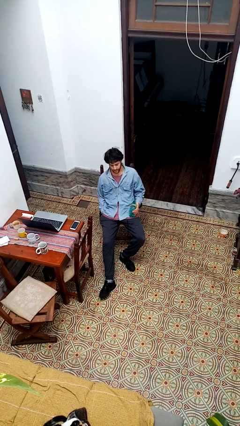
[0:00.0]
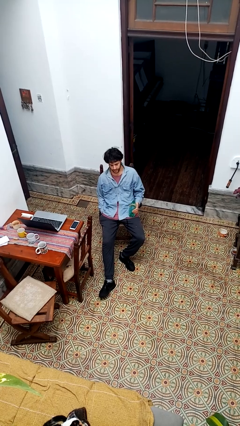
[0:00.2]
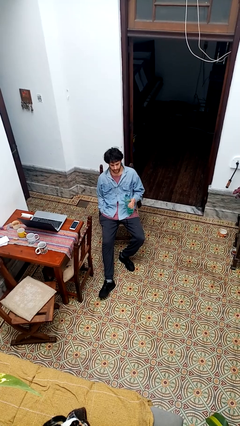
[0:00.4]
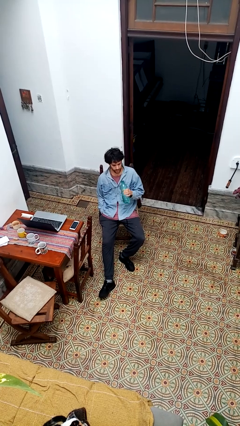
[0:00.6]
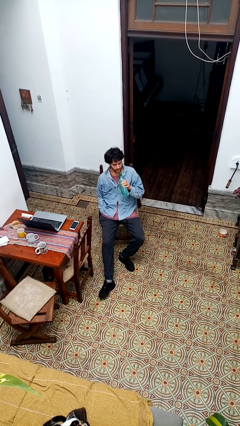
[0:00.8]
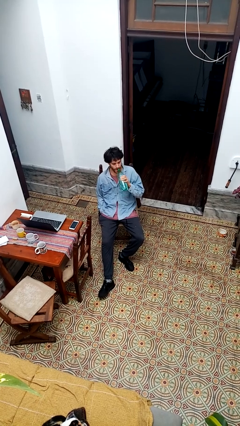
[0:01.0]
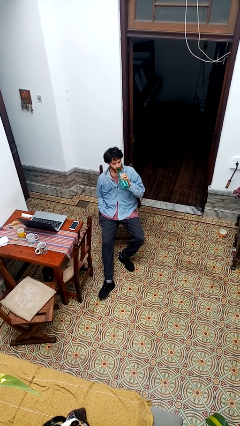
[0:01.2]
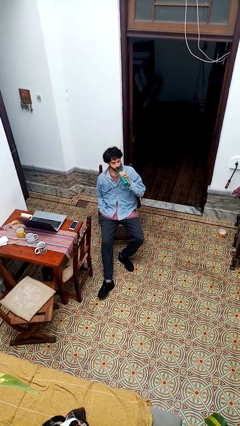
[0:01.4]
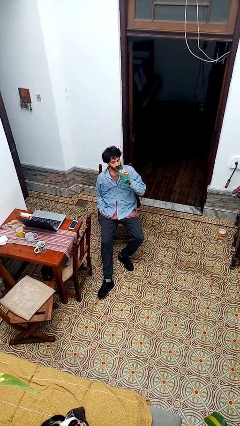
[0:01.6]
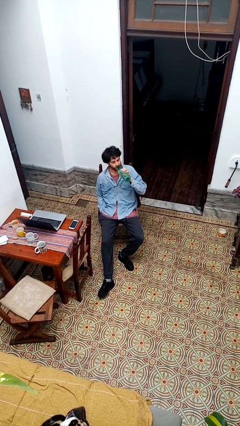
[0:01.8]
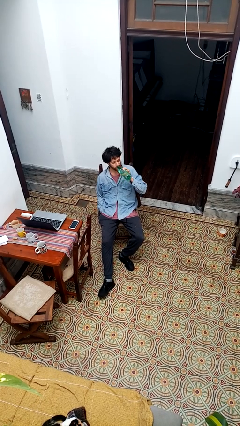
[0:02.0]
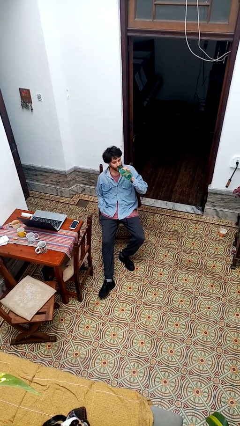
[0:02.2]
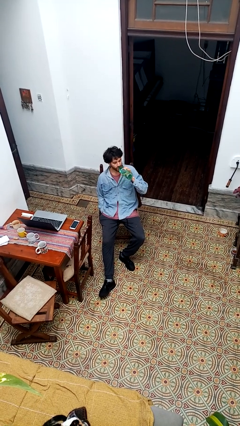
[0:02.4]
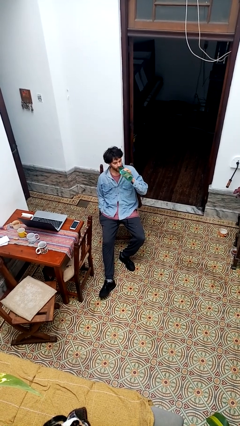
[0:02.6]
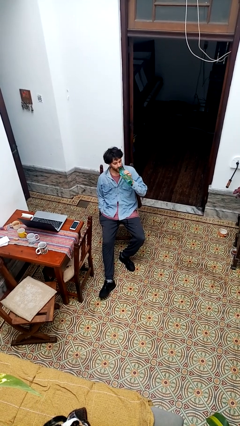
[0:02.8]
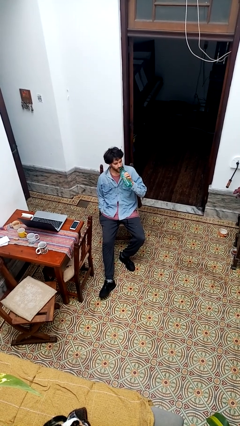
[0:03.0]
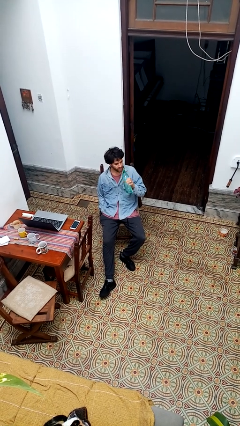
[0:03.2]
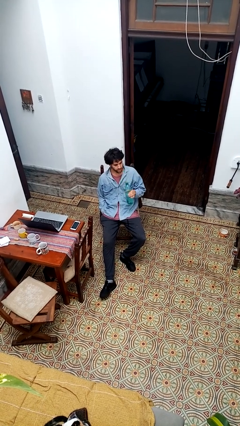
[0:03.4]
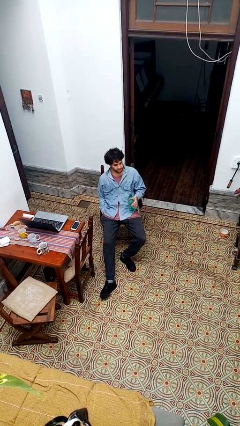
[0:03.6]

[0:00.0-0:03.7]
person drinks from bottle

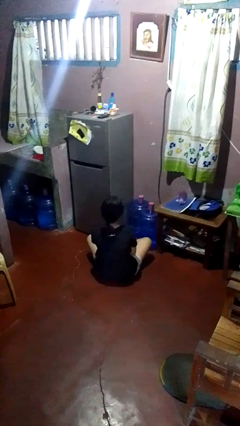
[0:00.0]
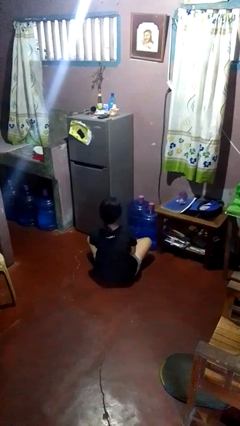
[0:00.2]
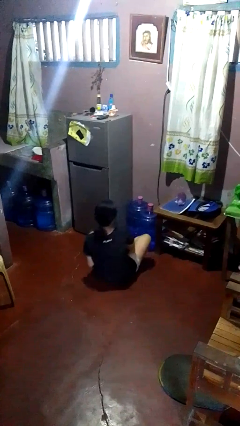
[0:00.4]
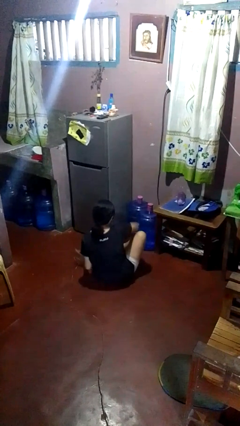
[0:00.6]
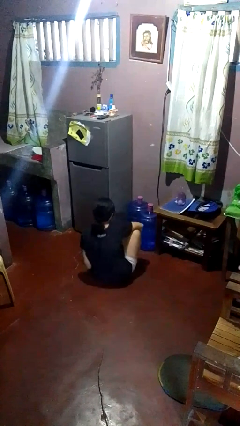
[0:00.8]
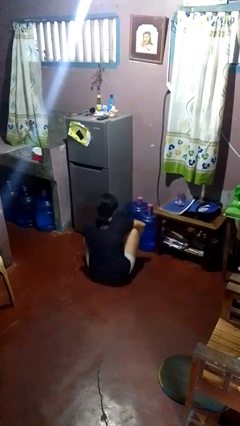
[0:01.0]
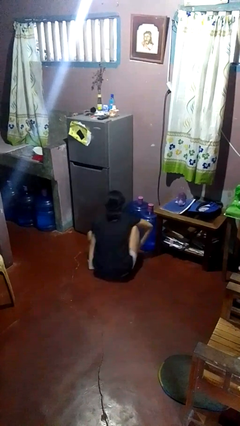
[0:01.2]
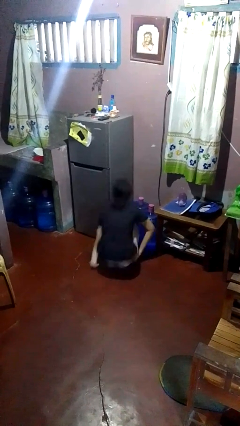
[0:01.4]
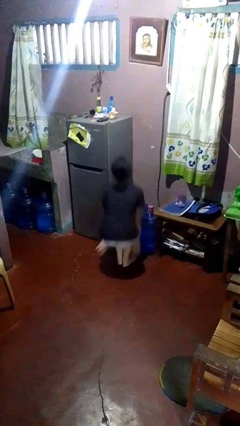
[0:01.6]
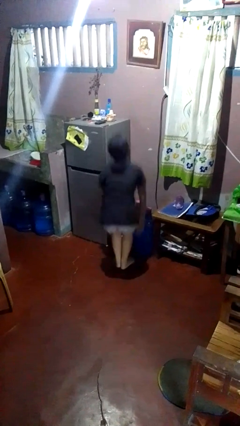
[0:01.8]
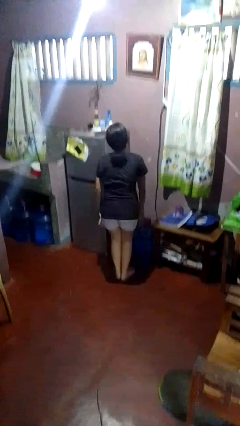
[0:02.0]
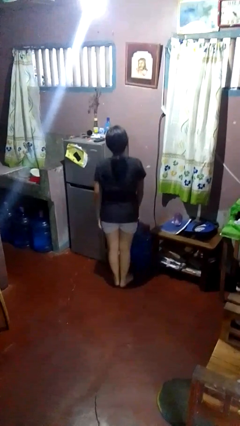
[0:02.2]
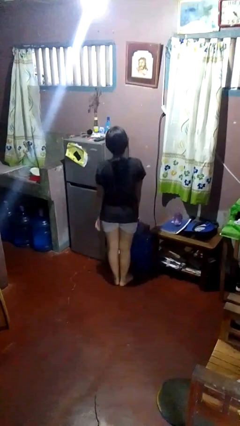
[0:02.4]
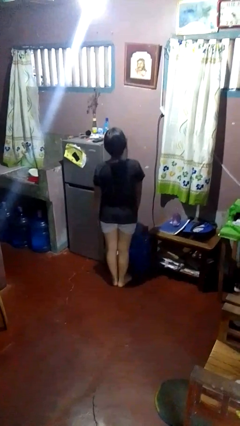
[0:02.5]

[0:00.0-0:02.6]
person stands up from floor

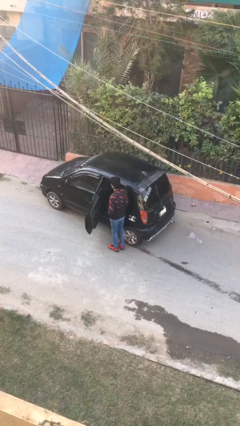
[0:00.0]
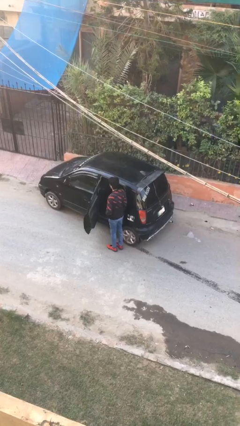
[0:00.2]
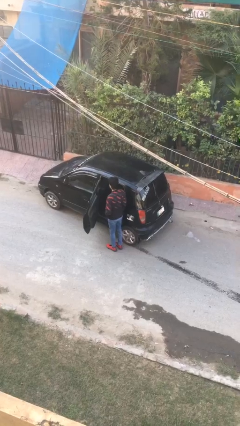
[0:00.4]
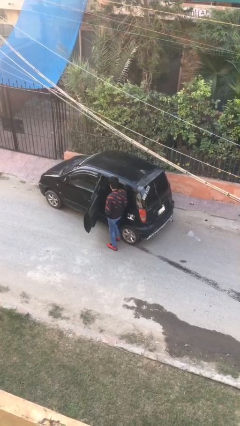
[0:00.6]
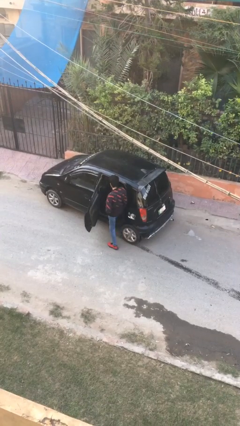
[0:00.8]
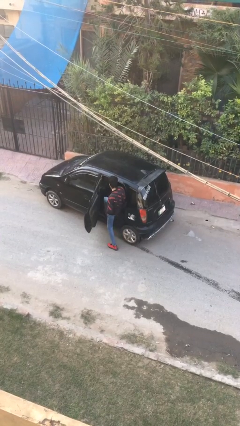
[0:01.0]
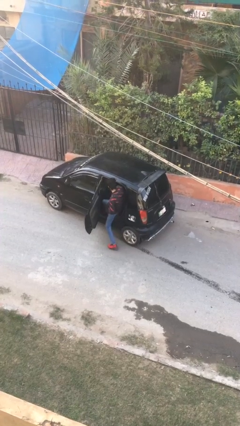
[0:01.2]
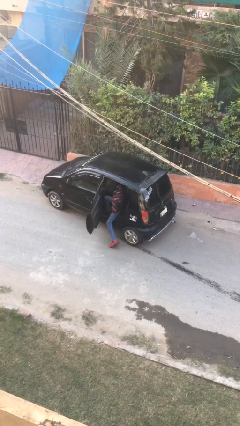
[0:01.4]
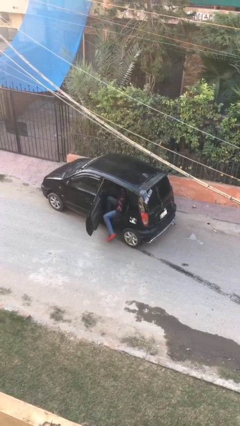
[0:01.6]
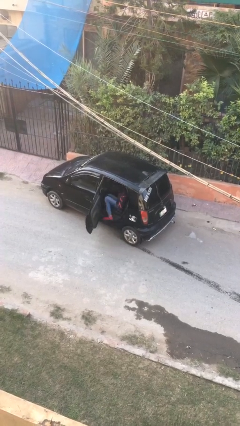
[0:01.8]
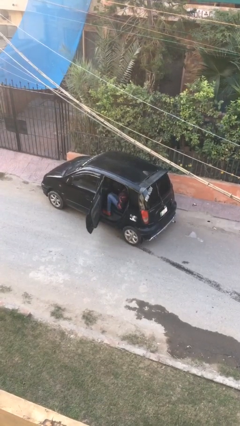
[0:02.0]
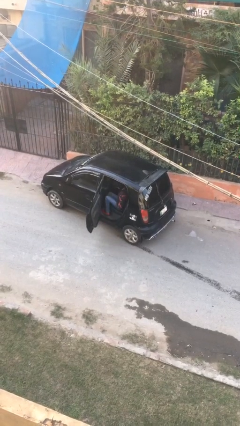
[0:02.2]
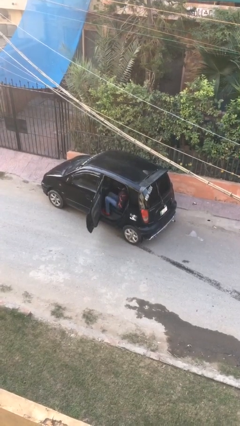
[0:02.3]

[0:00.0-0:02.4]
person enters car

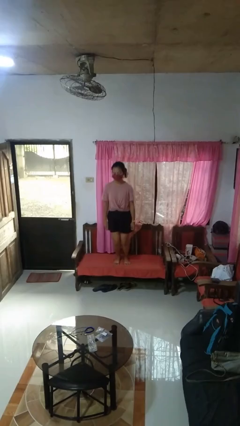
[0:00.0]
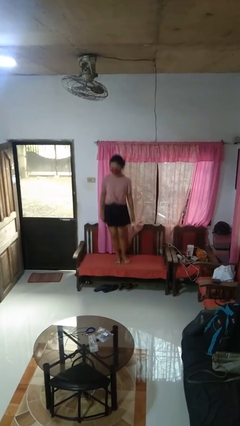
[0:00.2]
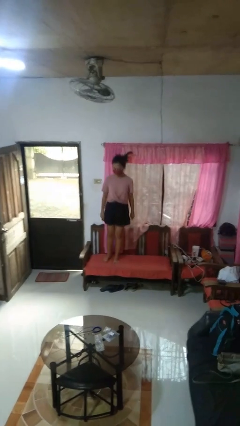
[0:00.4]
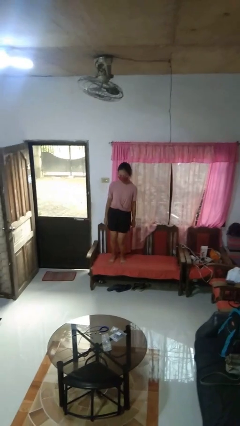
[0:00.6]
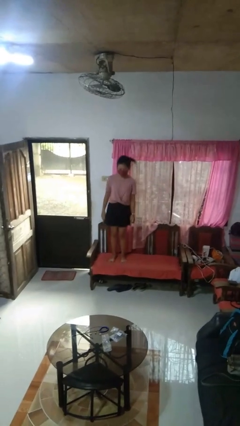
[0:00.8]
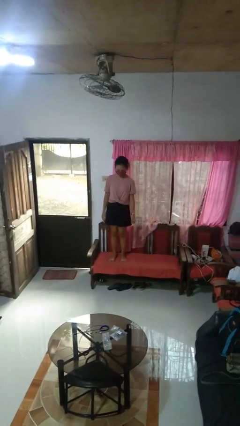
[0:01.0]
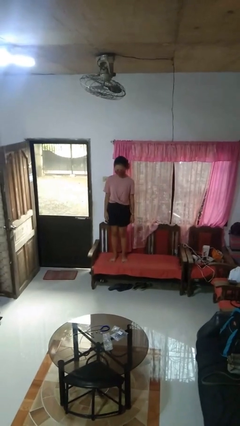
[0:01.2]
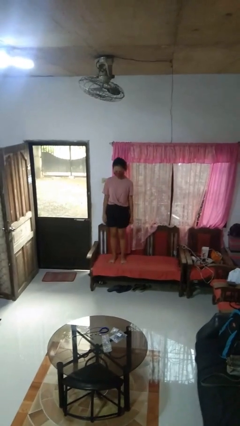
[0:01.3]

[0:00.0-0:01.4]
person jumps on couch

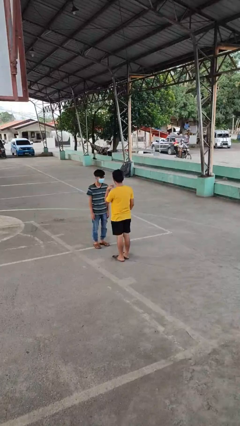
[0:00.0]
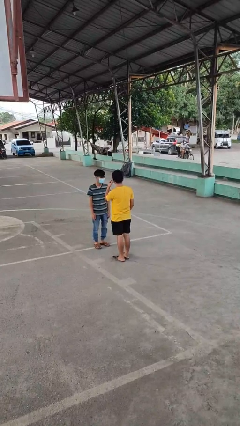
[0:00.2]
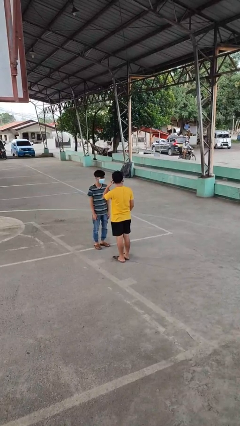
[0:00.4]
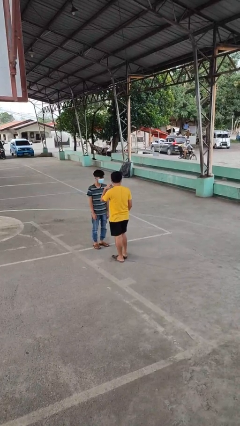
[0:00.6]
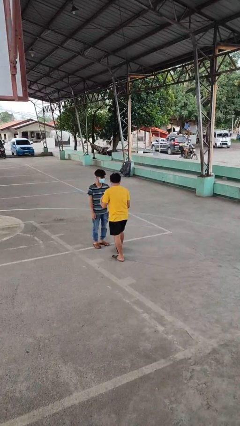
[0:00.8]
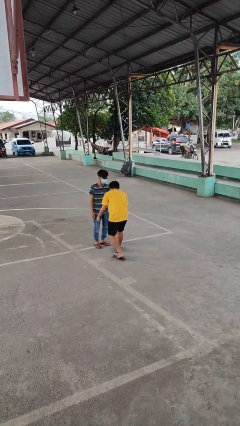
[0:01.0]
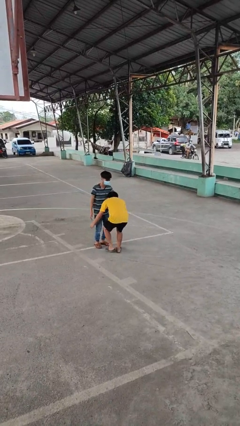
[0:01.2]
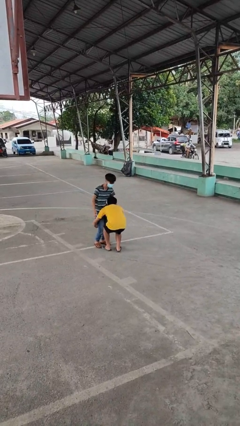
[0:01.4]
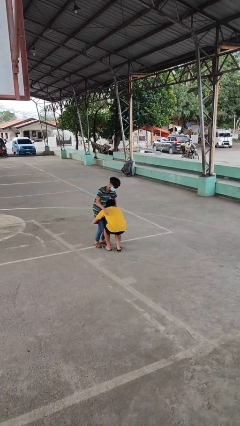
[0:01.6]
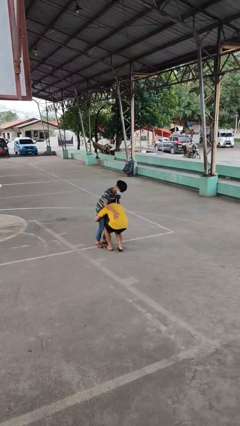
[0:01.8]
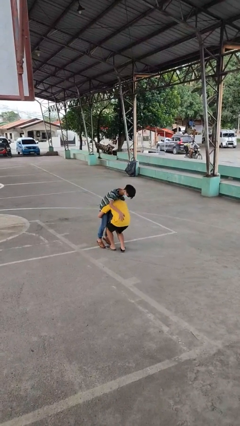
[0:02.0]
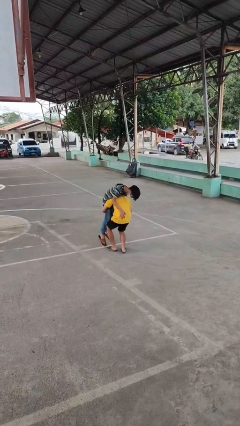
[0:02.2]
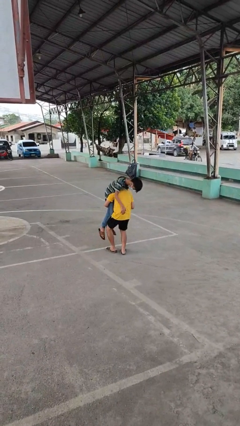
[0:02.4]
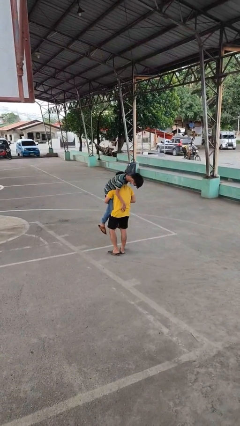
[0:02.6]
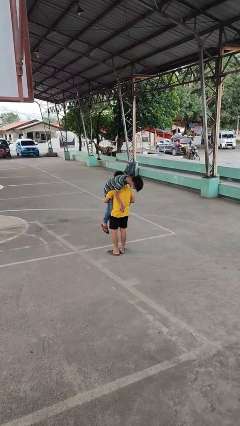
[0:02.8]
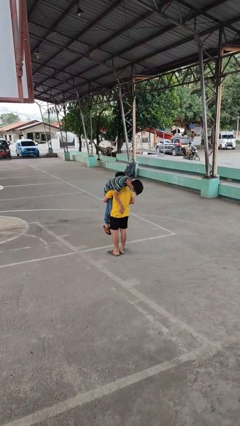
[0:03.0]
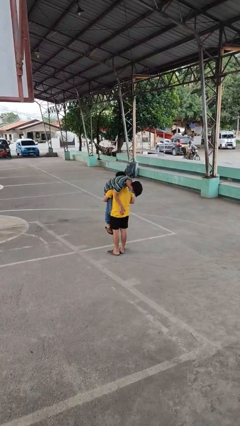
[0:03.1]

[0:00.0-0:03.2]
person carries person over shoulder

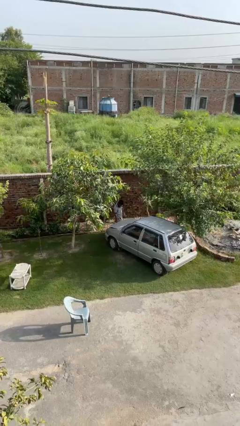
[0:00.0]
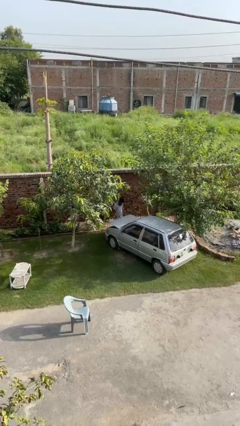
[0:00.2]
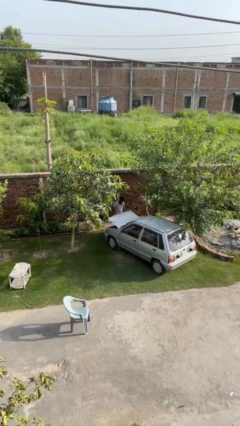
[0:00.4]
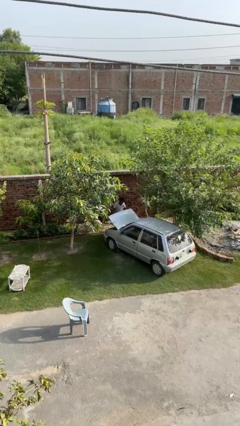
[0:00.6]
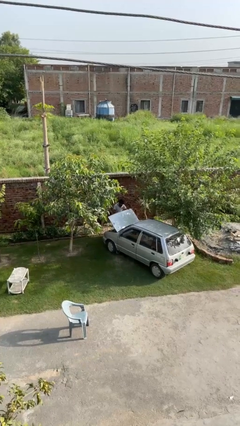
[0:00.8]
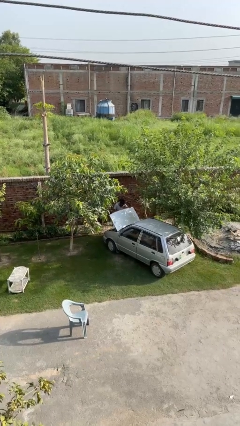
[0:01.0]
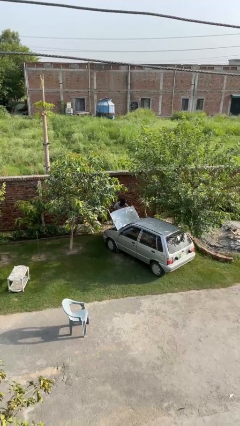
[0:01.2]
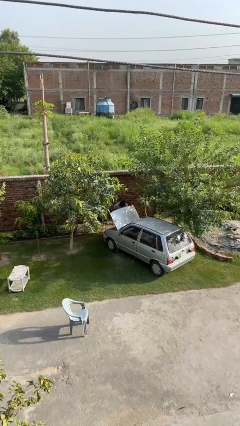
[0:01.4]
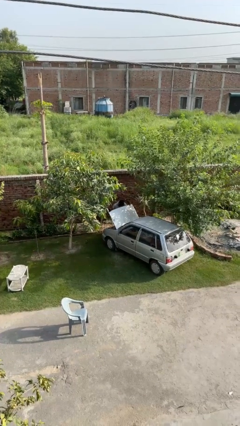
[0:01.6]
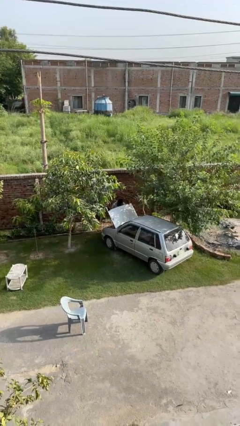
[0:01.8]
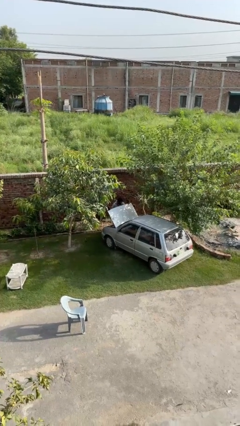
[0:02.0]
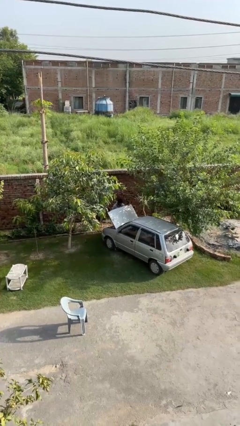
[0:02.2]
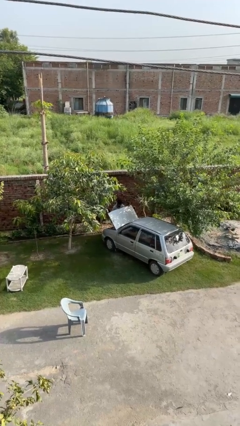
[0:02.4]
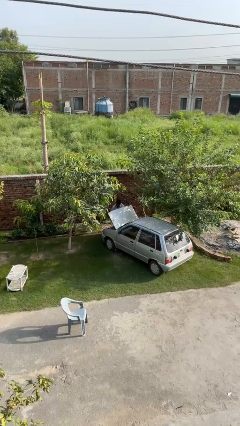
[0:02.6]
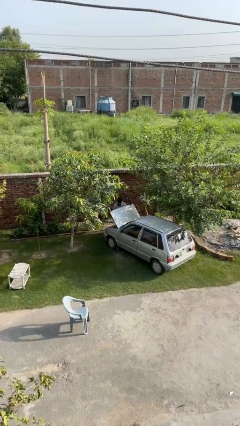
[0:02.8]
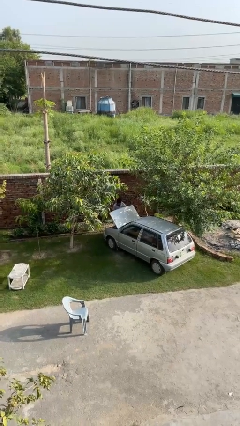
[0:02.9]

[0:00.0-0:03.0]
person opens car hood

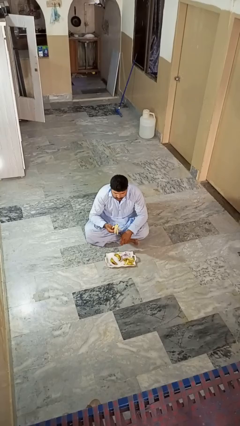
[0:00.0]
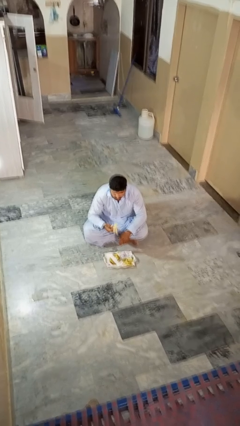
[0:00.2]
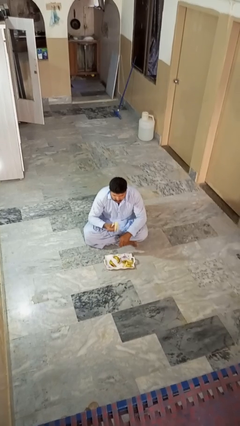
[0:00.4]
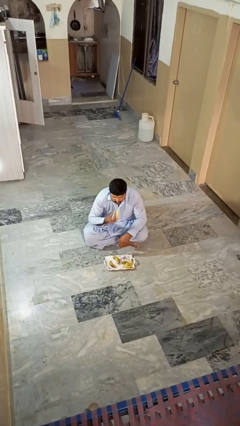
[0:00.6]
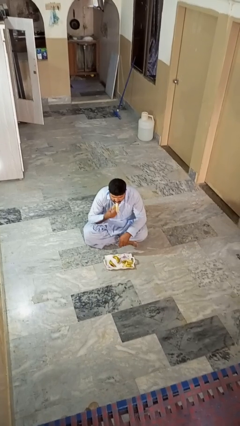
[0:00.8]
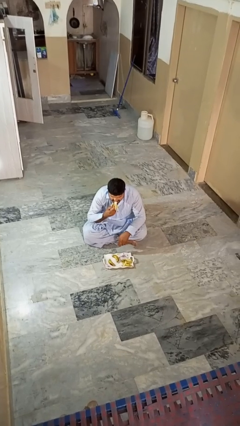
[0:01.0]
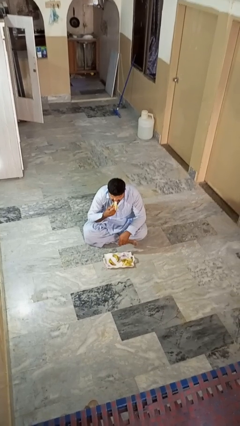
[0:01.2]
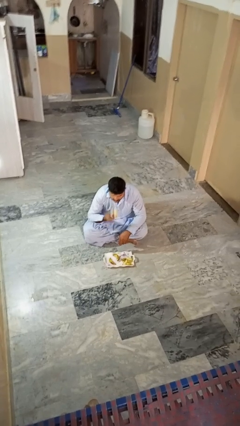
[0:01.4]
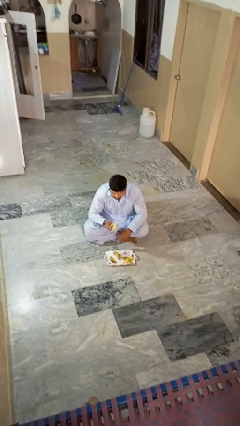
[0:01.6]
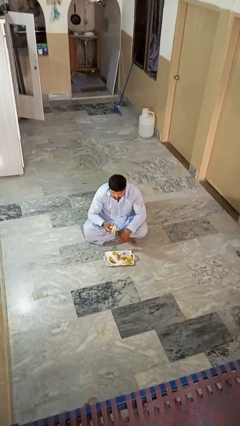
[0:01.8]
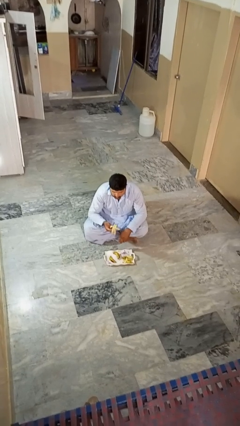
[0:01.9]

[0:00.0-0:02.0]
person eats banana
